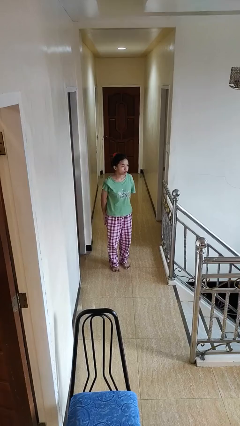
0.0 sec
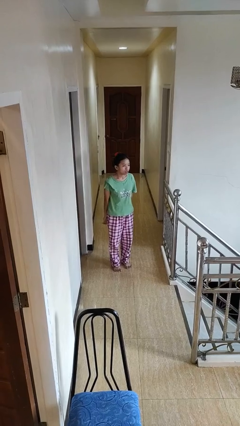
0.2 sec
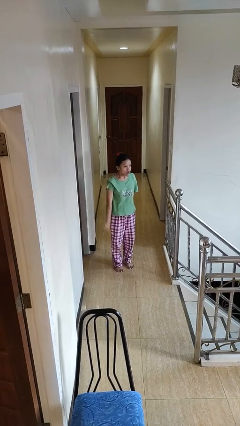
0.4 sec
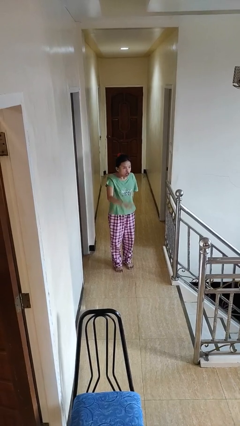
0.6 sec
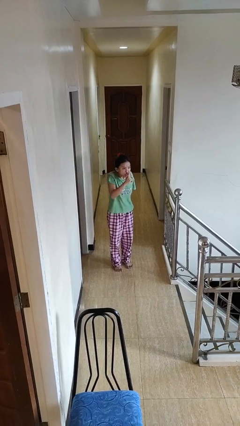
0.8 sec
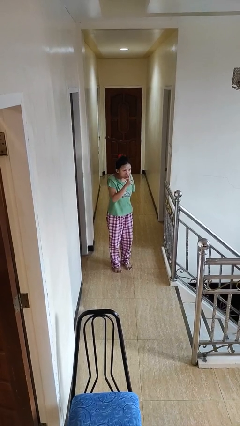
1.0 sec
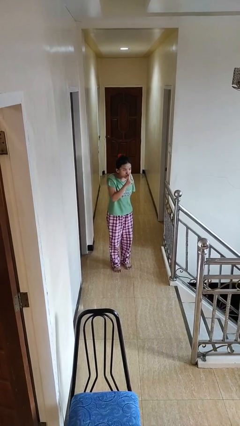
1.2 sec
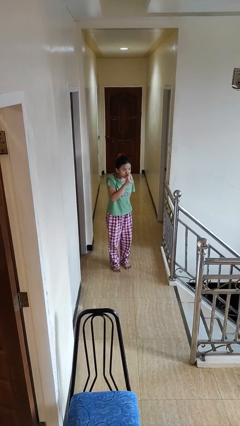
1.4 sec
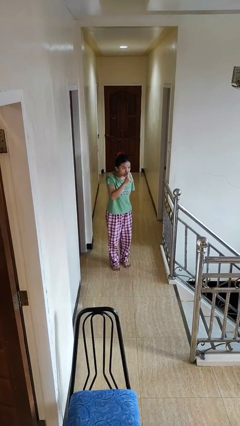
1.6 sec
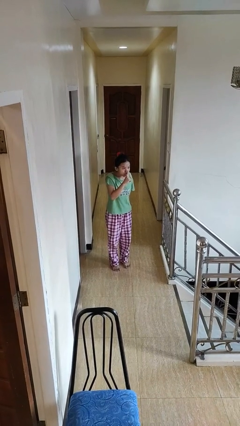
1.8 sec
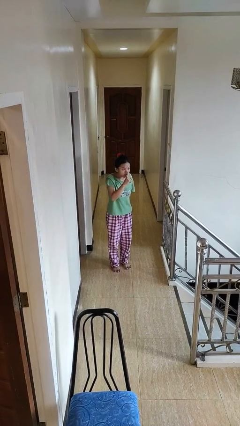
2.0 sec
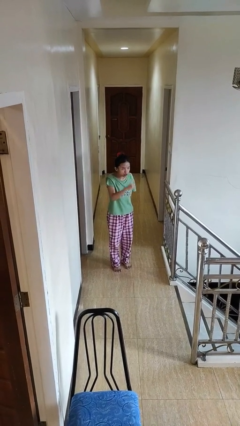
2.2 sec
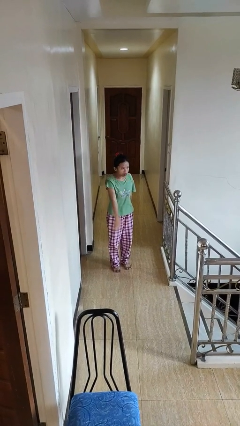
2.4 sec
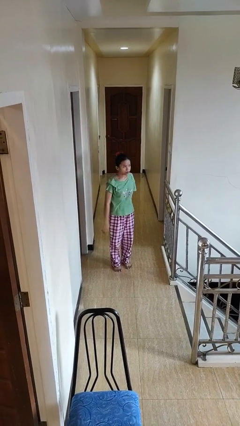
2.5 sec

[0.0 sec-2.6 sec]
person gestures be quiet

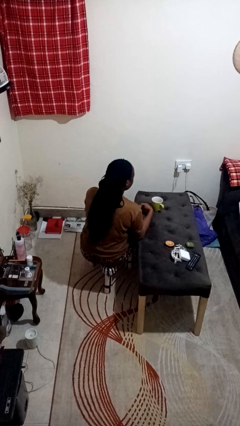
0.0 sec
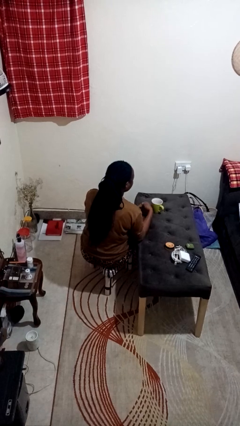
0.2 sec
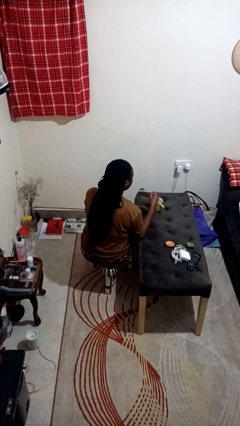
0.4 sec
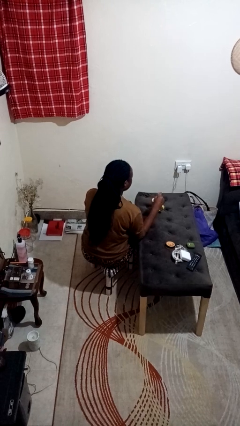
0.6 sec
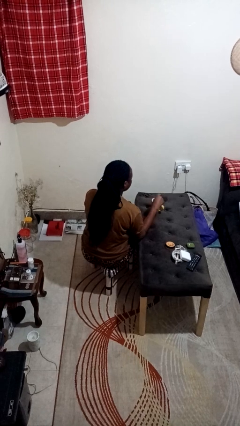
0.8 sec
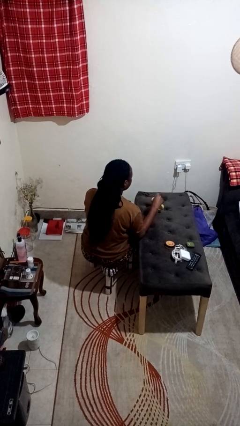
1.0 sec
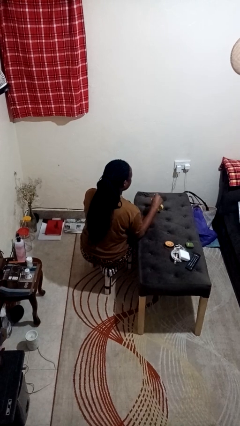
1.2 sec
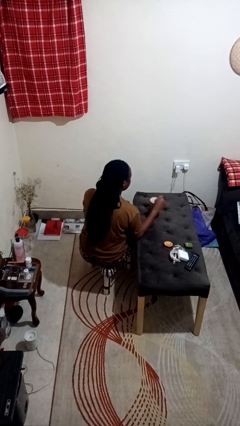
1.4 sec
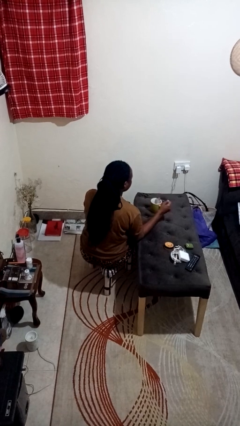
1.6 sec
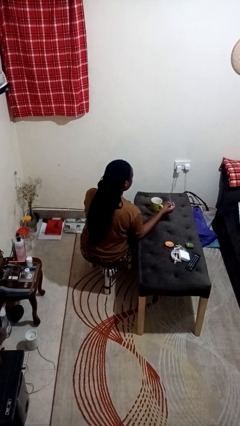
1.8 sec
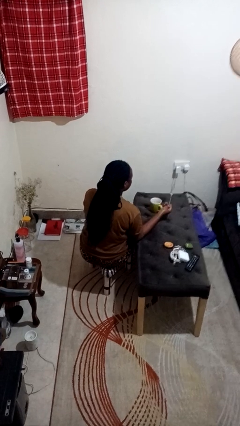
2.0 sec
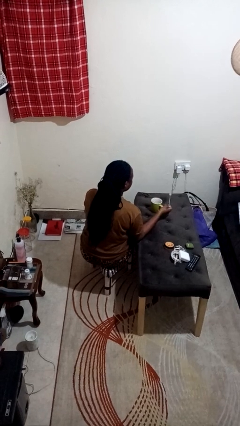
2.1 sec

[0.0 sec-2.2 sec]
person stirs mug

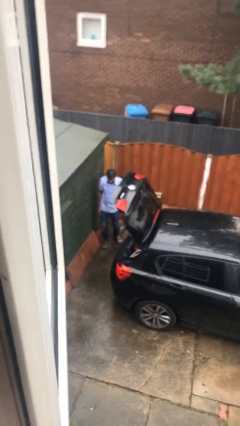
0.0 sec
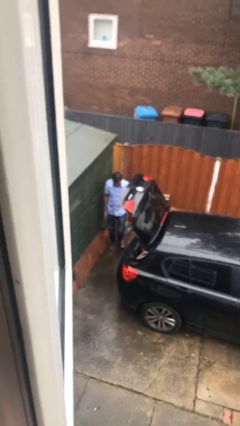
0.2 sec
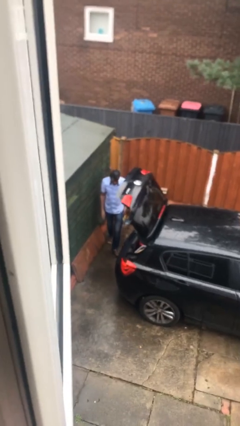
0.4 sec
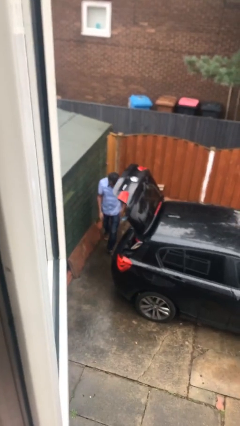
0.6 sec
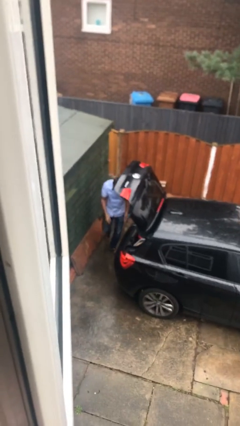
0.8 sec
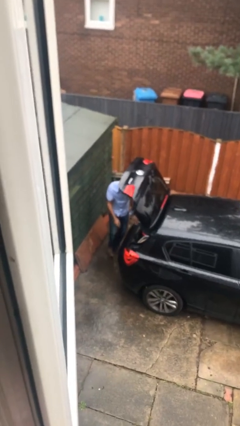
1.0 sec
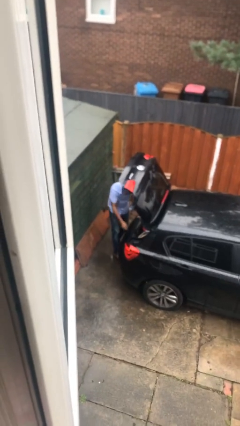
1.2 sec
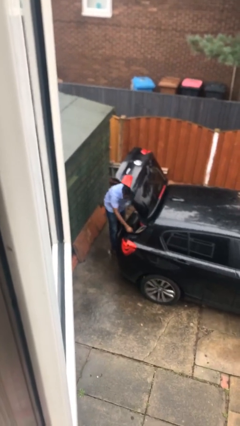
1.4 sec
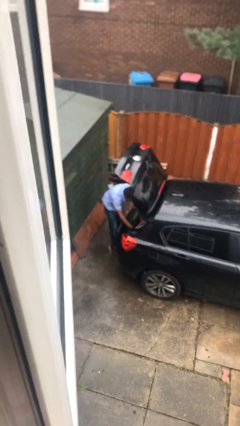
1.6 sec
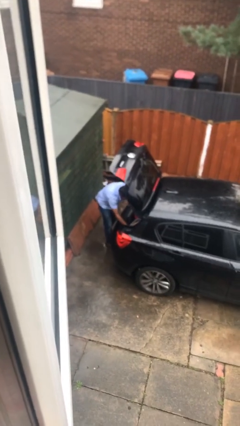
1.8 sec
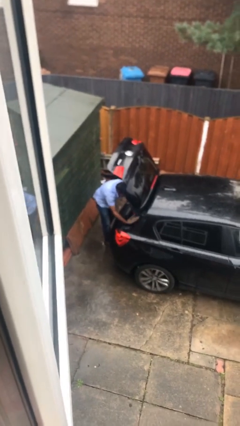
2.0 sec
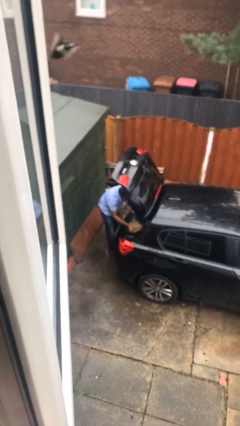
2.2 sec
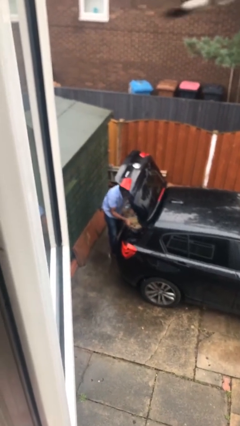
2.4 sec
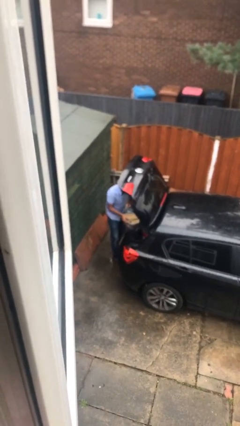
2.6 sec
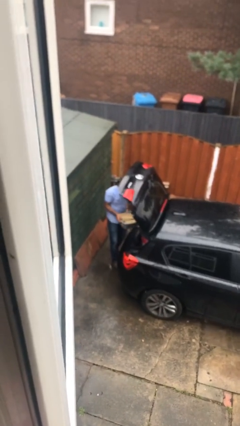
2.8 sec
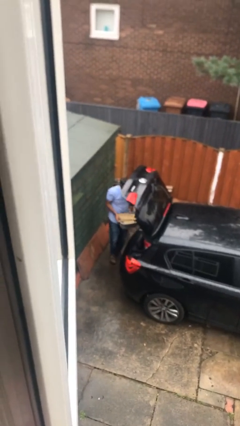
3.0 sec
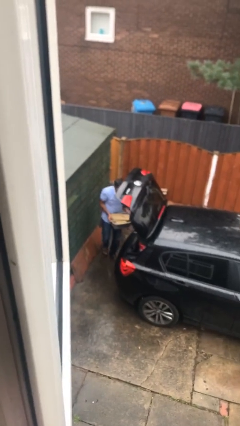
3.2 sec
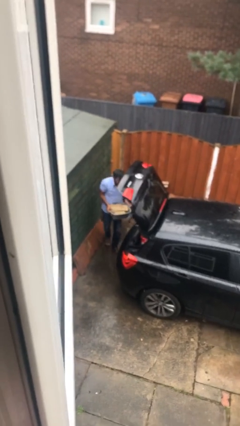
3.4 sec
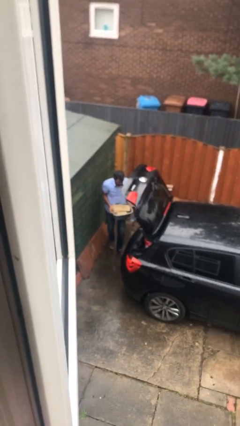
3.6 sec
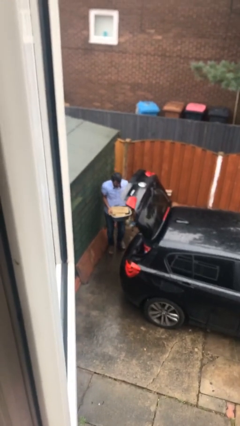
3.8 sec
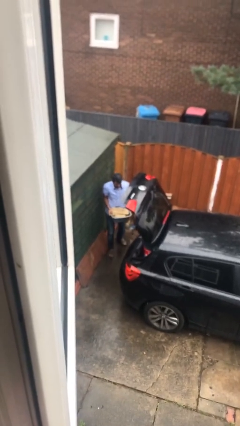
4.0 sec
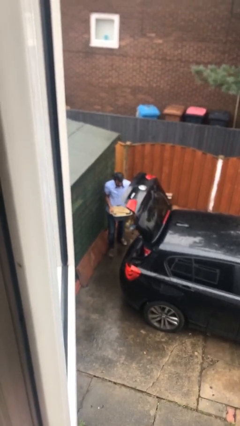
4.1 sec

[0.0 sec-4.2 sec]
person unloads car

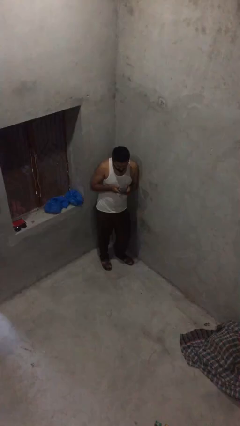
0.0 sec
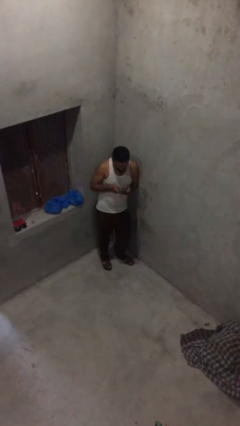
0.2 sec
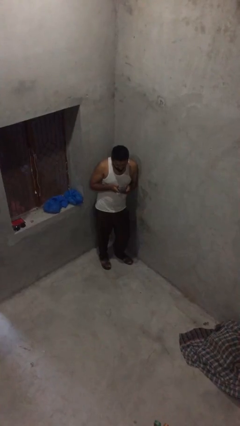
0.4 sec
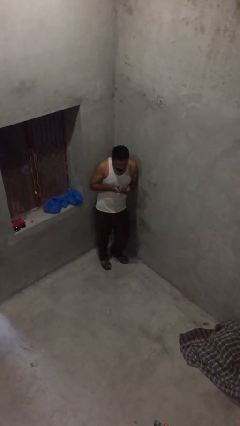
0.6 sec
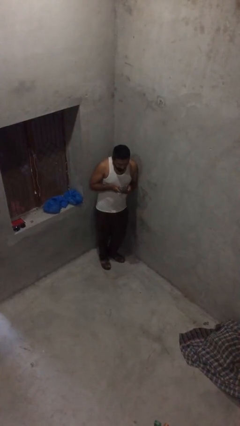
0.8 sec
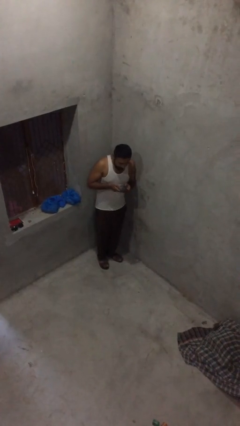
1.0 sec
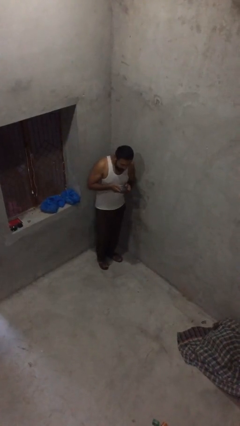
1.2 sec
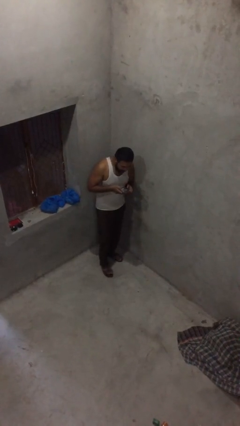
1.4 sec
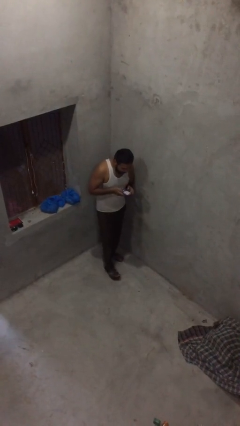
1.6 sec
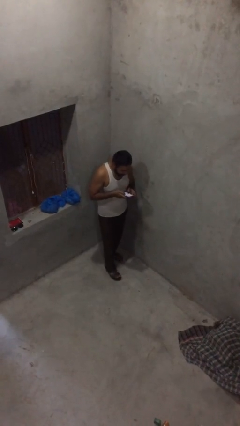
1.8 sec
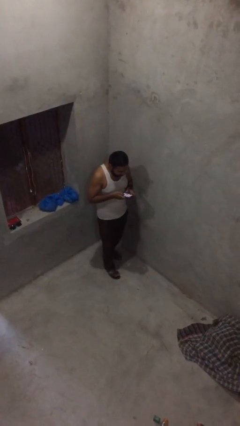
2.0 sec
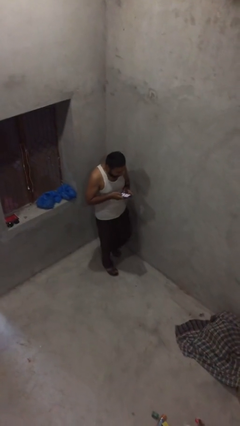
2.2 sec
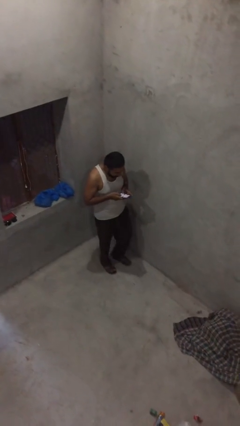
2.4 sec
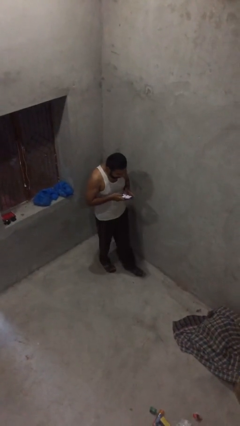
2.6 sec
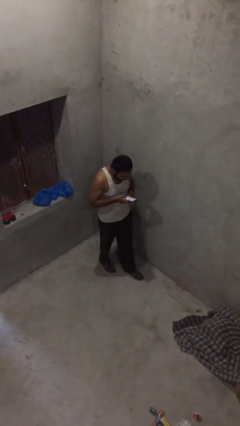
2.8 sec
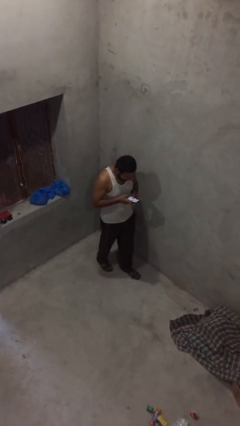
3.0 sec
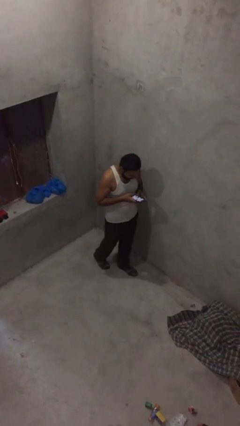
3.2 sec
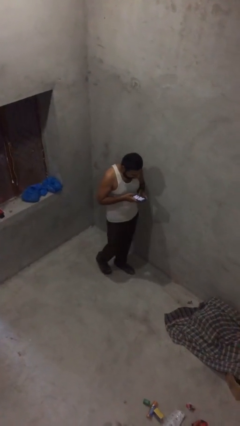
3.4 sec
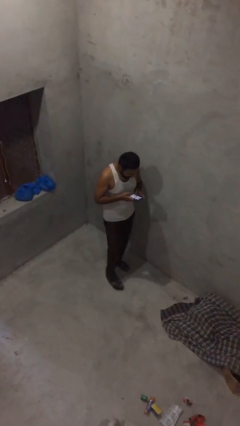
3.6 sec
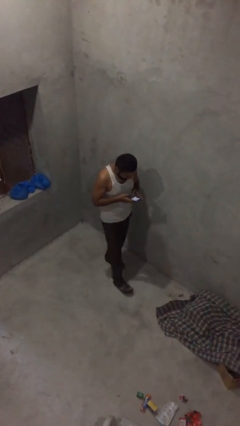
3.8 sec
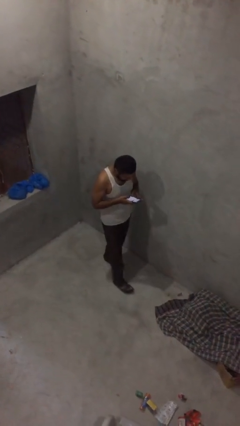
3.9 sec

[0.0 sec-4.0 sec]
person texts on phone

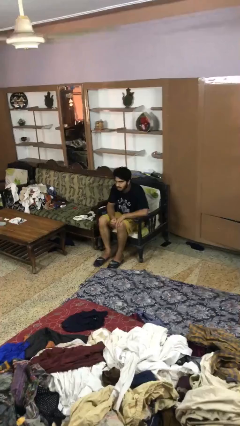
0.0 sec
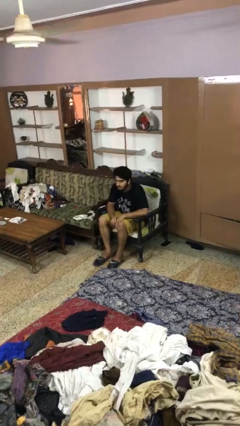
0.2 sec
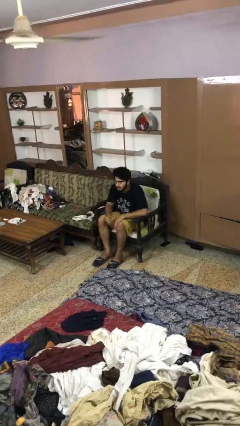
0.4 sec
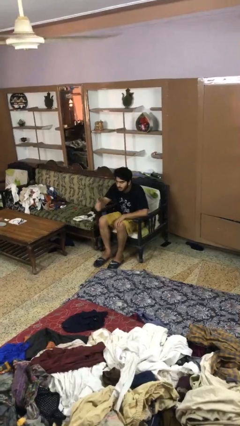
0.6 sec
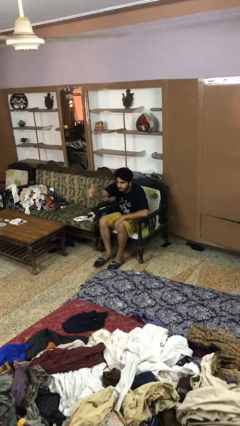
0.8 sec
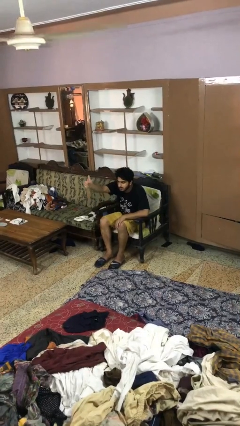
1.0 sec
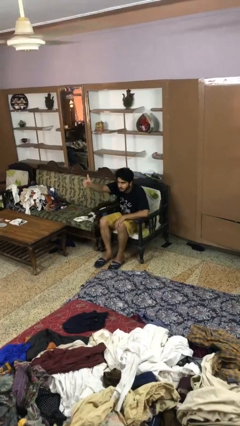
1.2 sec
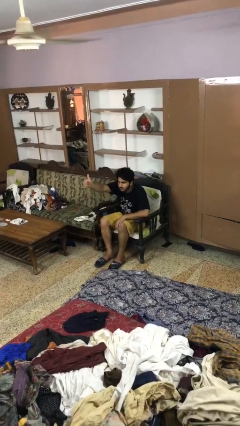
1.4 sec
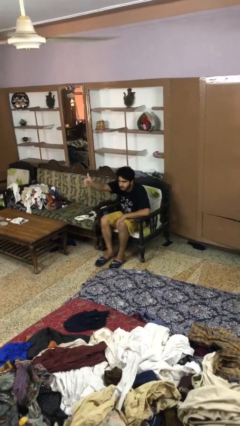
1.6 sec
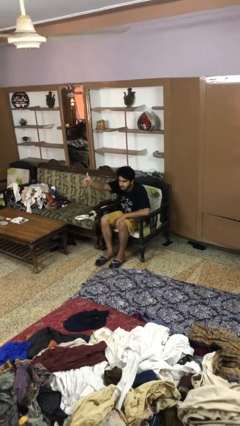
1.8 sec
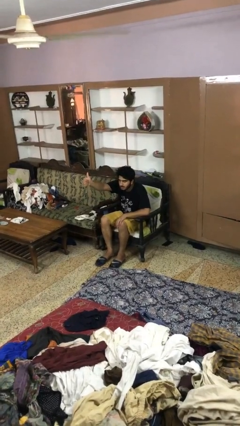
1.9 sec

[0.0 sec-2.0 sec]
person gestures thumbs up

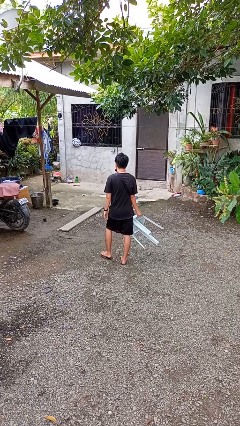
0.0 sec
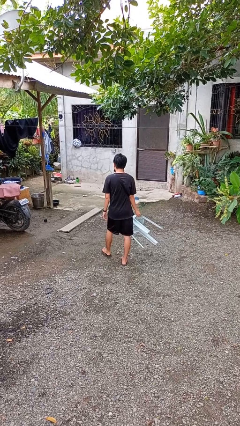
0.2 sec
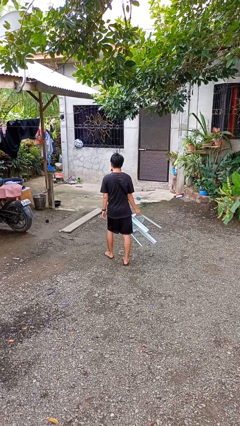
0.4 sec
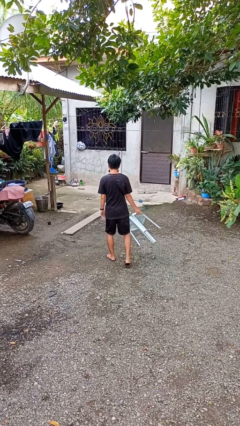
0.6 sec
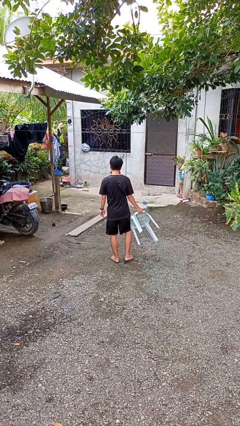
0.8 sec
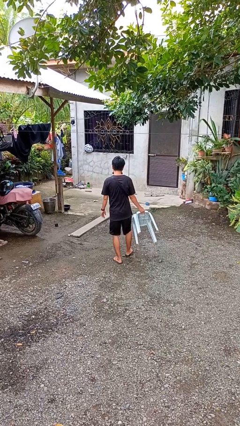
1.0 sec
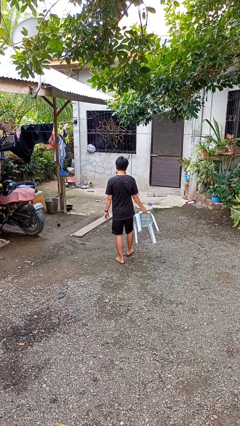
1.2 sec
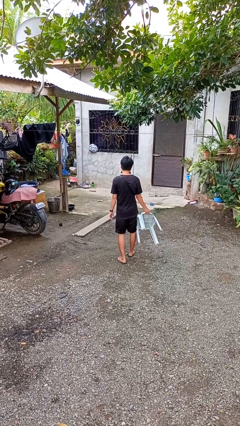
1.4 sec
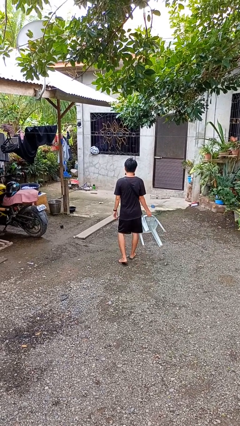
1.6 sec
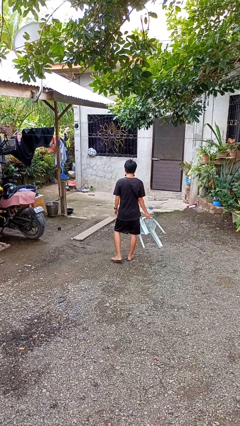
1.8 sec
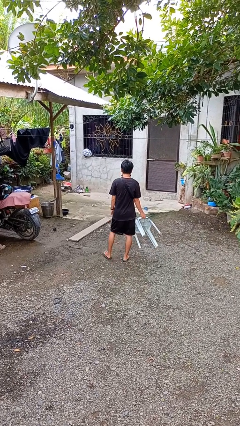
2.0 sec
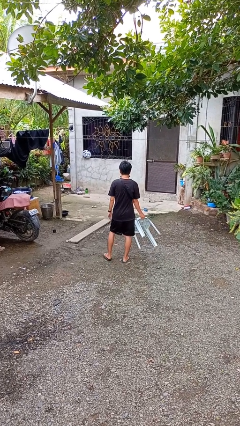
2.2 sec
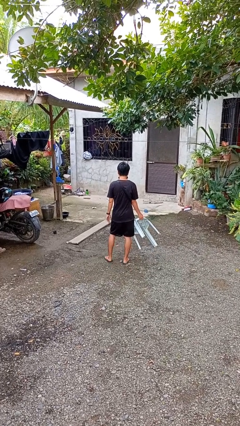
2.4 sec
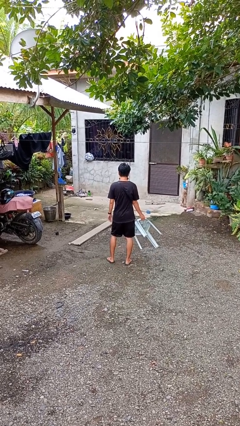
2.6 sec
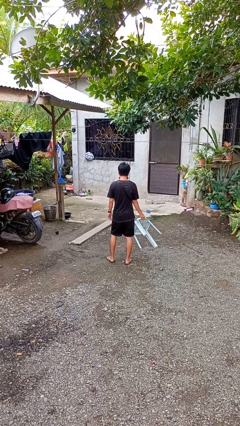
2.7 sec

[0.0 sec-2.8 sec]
person carries furniture

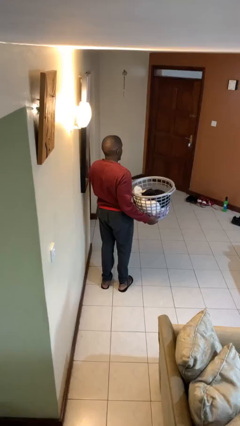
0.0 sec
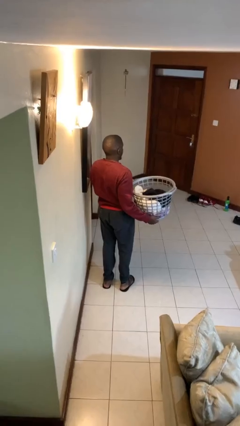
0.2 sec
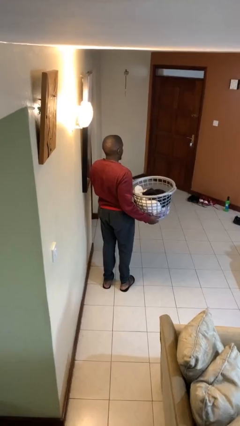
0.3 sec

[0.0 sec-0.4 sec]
person carries laundry basket
